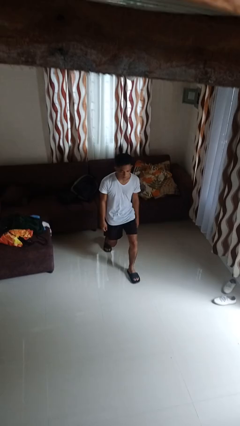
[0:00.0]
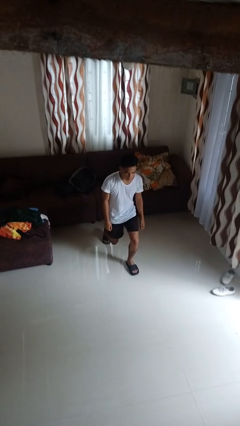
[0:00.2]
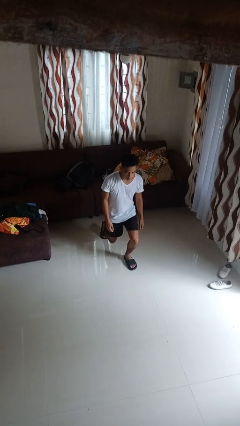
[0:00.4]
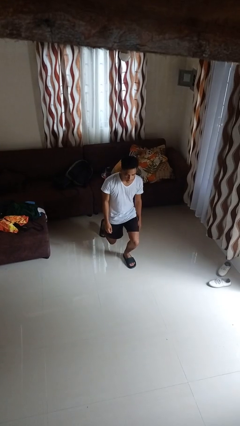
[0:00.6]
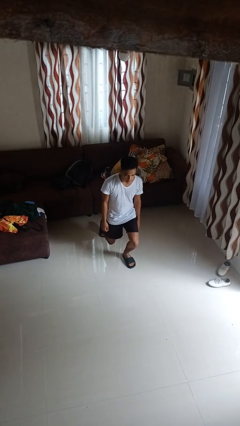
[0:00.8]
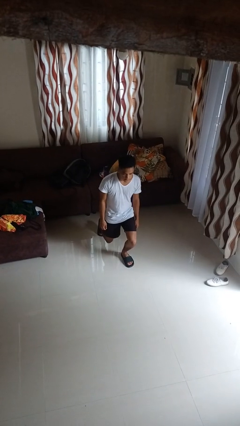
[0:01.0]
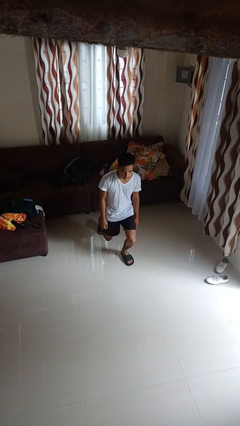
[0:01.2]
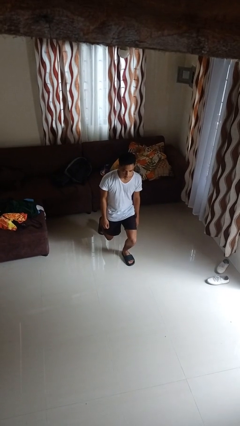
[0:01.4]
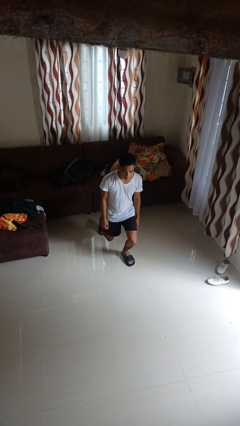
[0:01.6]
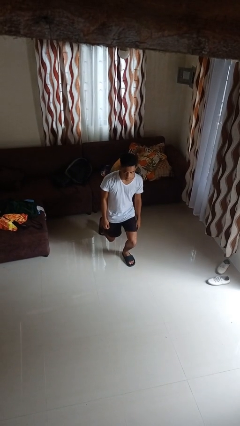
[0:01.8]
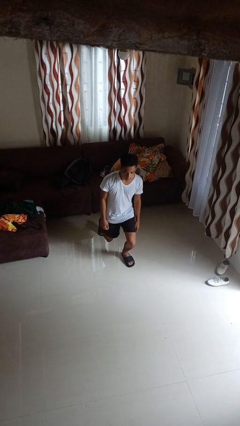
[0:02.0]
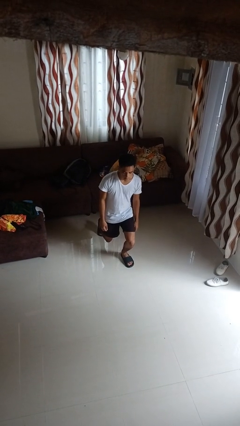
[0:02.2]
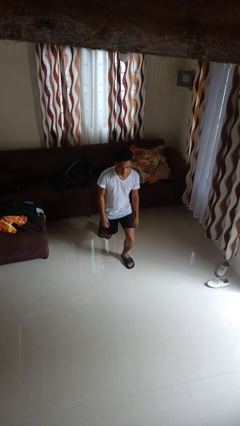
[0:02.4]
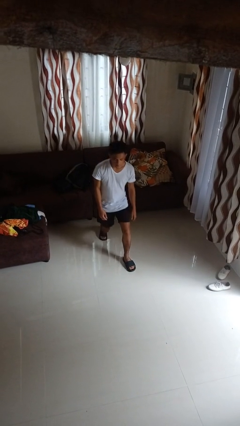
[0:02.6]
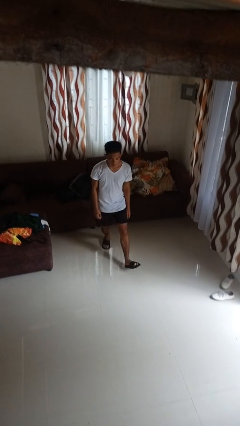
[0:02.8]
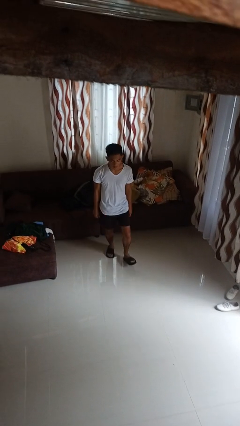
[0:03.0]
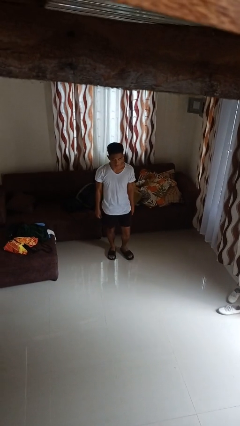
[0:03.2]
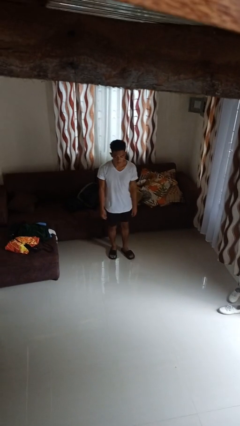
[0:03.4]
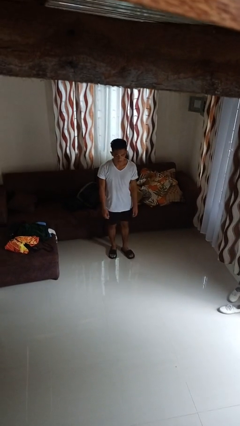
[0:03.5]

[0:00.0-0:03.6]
person exercises with lunges

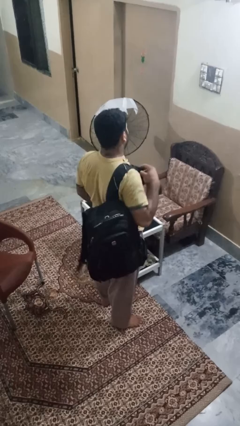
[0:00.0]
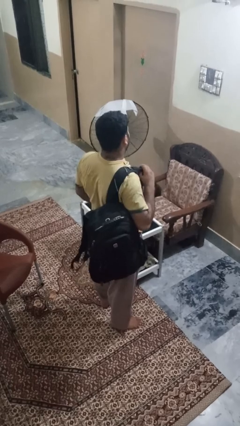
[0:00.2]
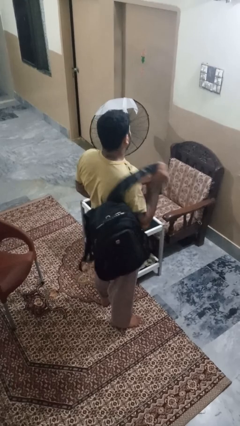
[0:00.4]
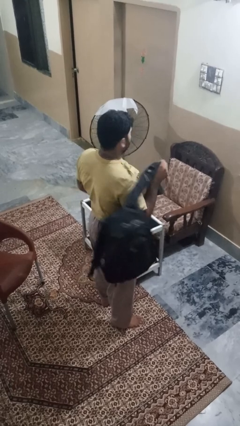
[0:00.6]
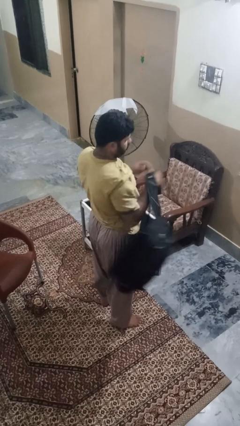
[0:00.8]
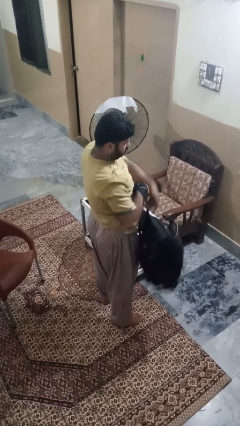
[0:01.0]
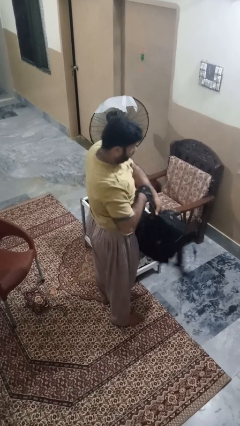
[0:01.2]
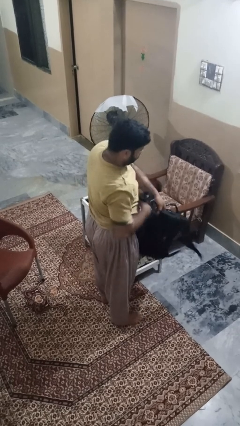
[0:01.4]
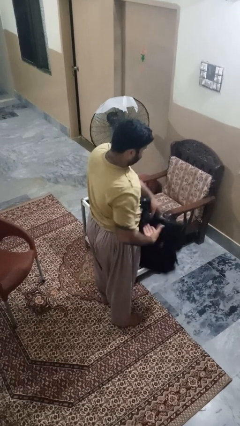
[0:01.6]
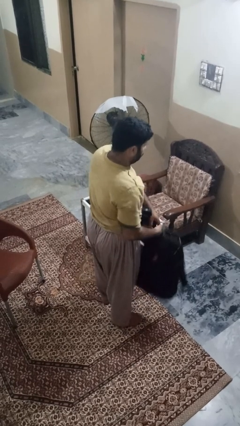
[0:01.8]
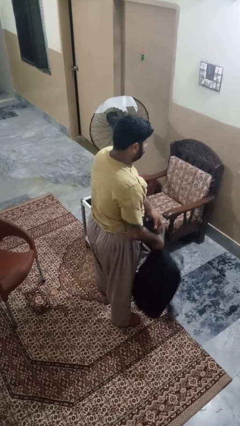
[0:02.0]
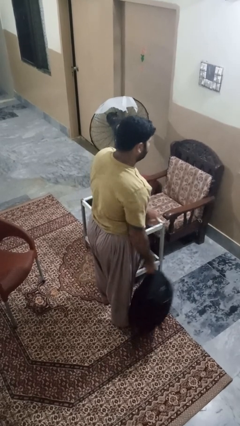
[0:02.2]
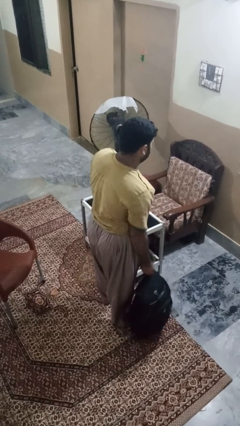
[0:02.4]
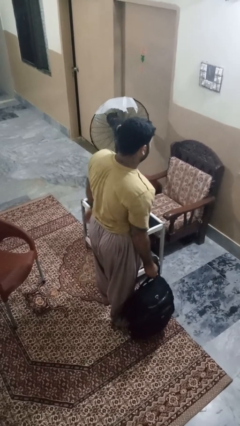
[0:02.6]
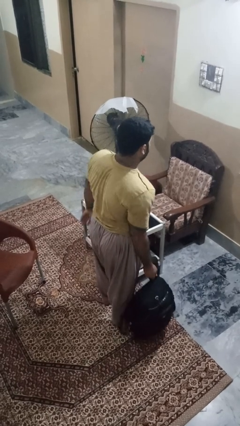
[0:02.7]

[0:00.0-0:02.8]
person takes off backpack

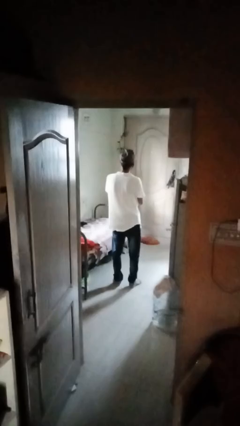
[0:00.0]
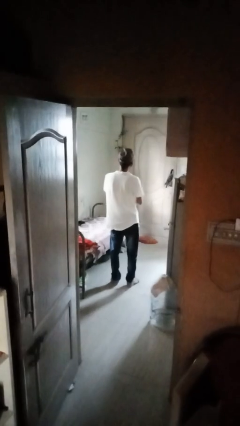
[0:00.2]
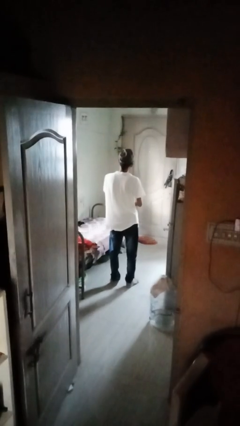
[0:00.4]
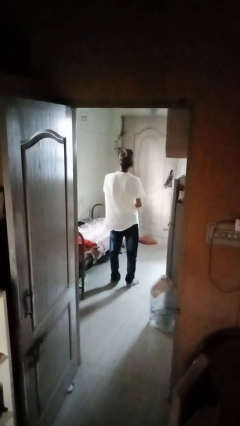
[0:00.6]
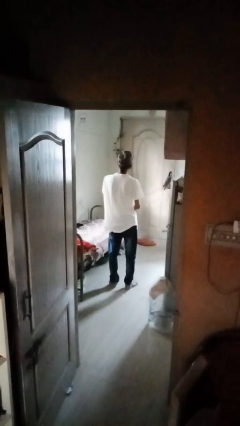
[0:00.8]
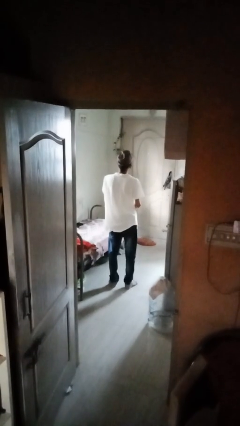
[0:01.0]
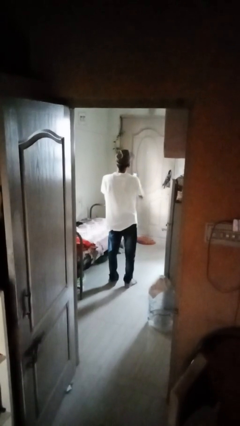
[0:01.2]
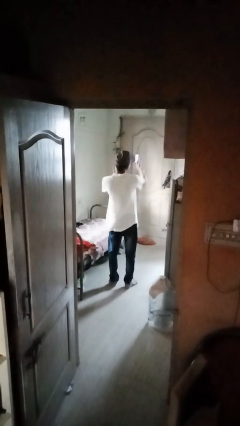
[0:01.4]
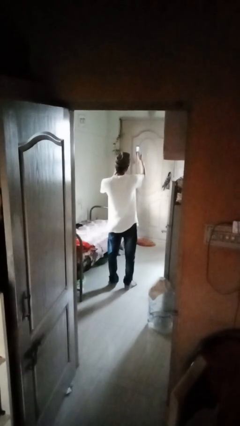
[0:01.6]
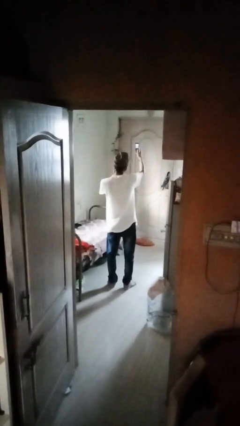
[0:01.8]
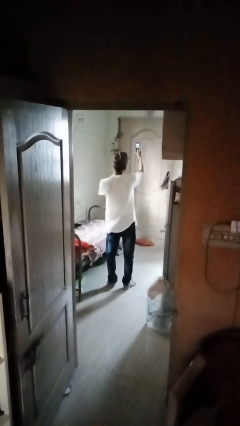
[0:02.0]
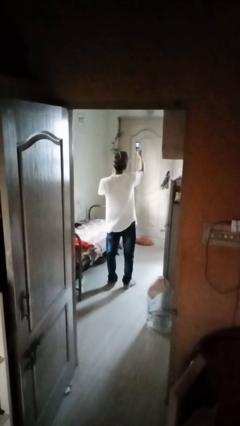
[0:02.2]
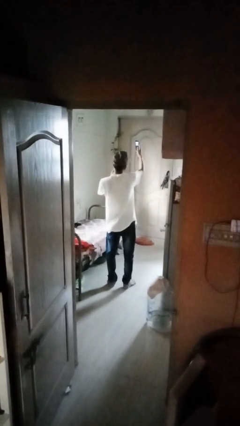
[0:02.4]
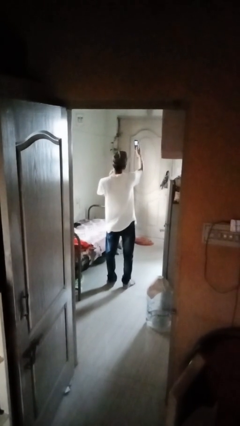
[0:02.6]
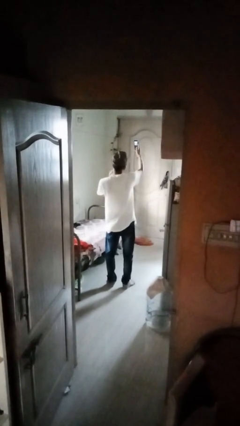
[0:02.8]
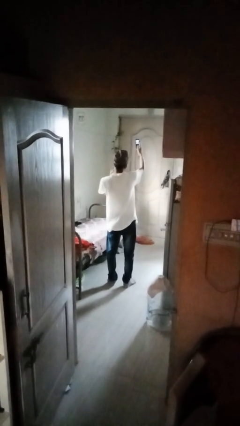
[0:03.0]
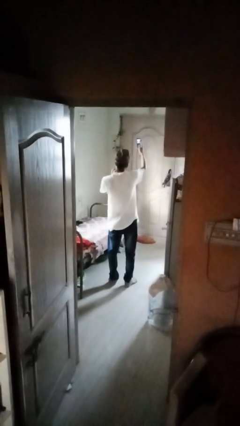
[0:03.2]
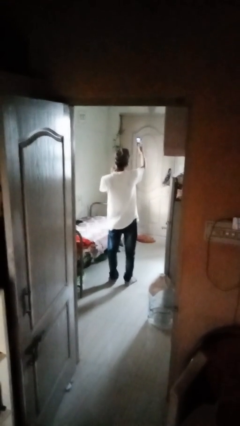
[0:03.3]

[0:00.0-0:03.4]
person takes selfie

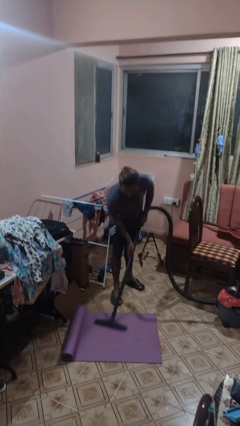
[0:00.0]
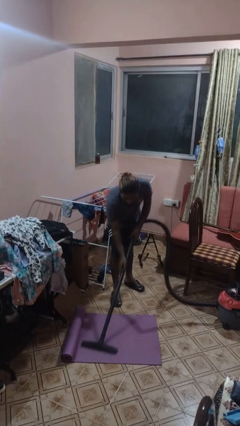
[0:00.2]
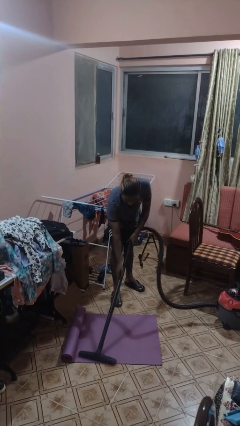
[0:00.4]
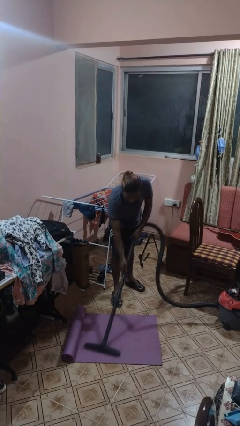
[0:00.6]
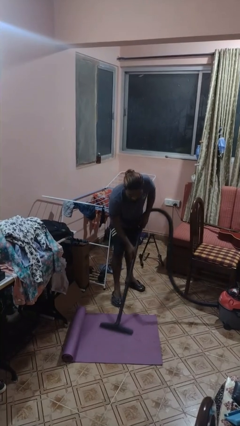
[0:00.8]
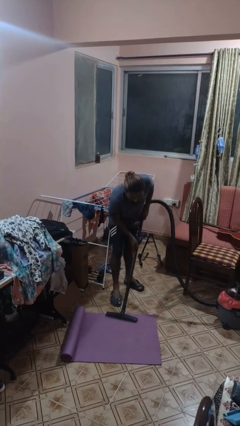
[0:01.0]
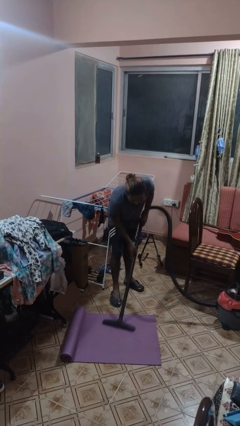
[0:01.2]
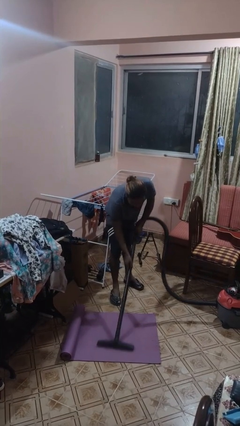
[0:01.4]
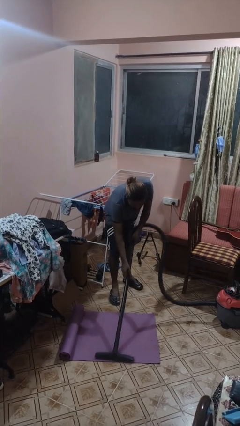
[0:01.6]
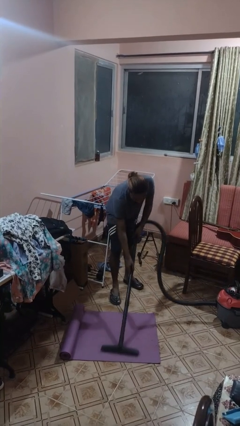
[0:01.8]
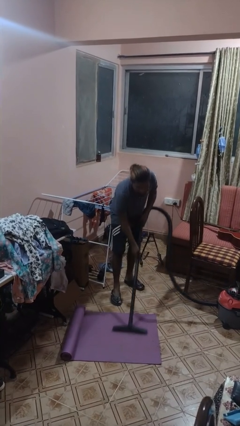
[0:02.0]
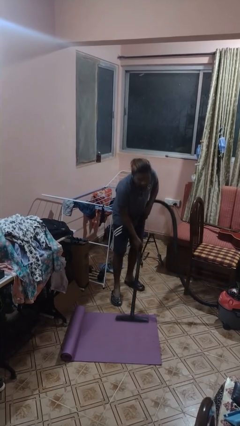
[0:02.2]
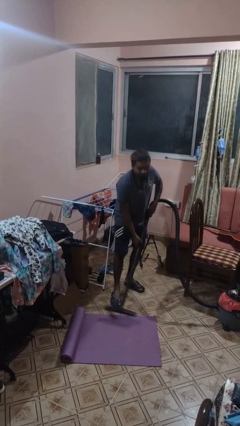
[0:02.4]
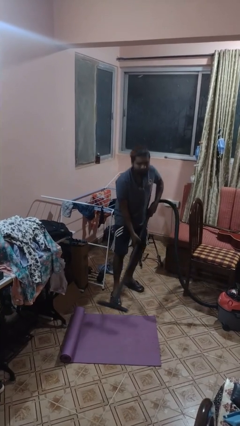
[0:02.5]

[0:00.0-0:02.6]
person vacuums carpet

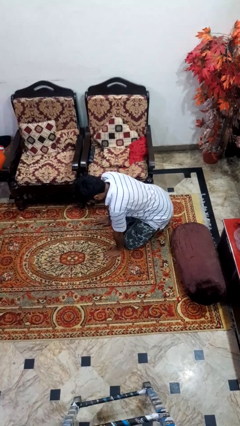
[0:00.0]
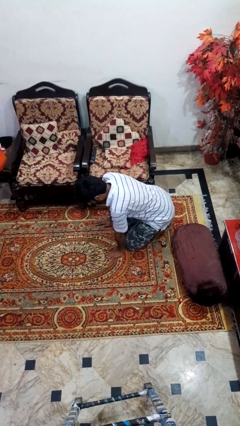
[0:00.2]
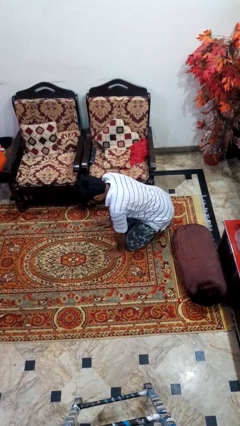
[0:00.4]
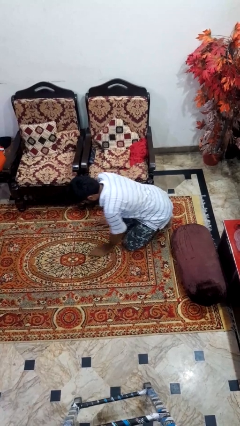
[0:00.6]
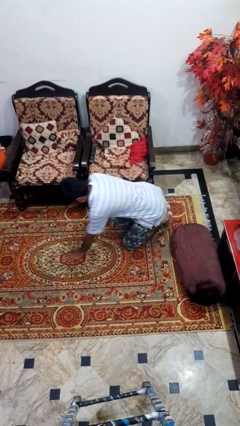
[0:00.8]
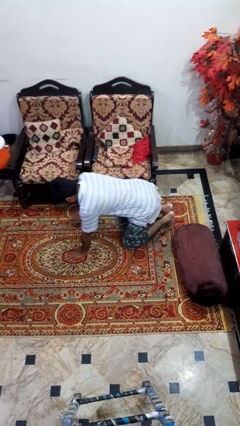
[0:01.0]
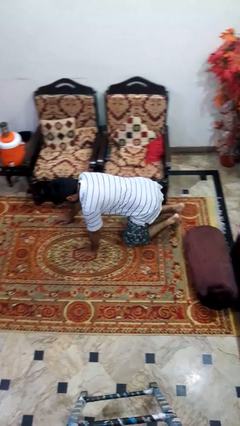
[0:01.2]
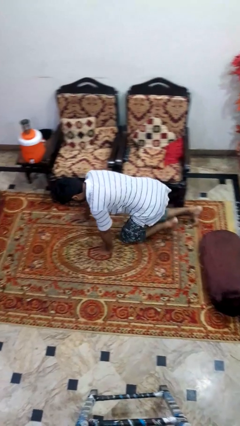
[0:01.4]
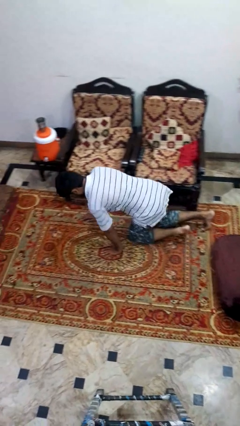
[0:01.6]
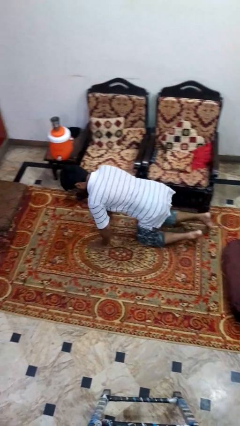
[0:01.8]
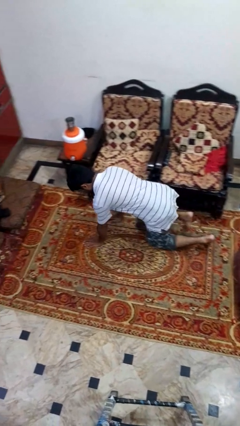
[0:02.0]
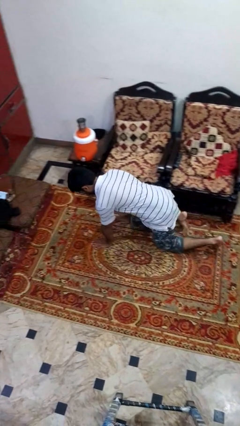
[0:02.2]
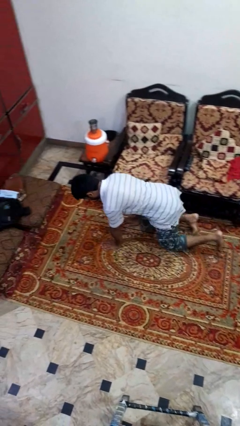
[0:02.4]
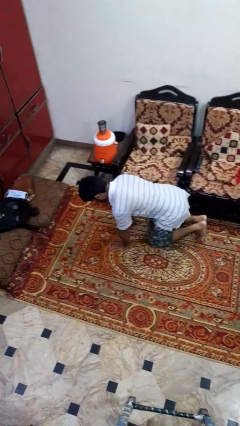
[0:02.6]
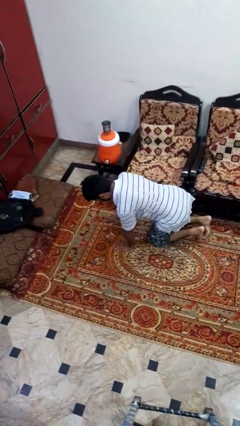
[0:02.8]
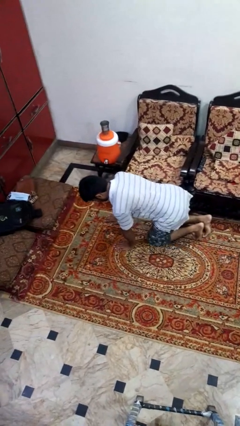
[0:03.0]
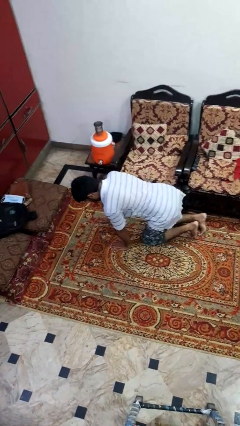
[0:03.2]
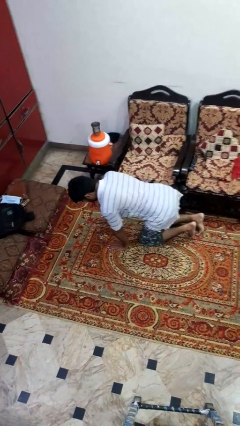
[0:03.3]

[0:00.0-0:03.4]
person crawls

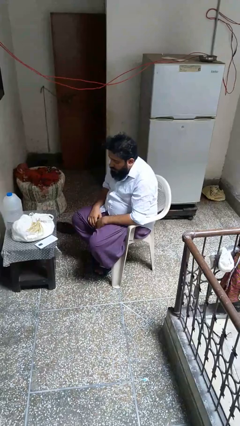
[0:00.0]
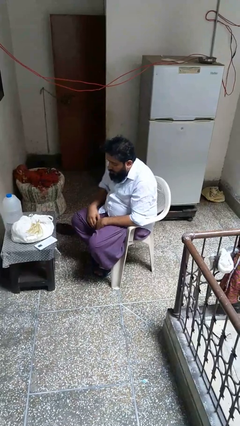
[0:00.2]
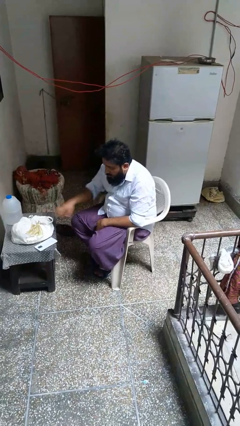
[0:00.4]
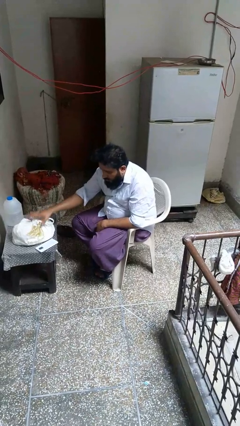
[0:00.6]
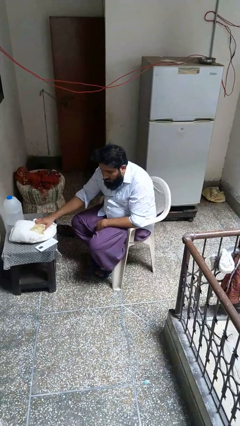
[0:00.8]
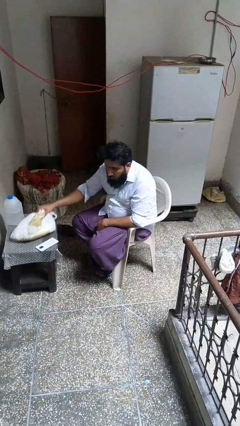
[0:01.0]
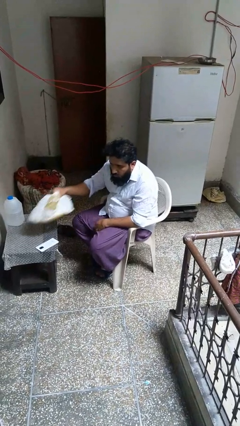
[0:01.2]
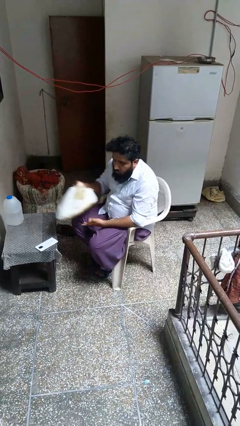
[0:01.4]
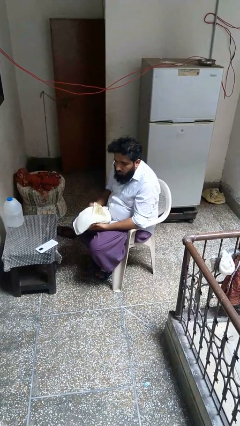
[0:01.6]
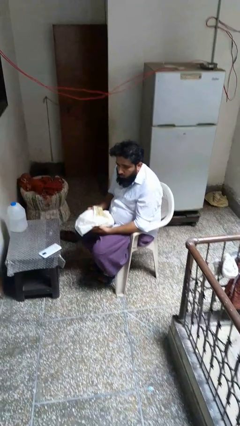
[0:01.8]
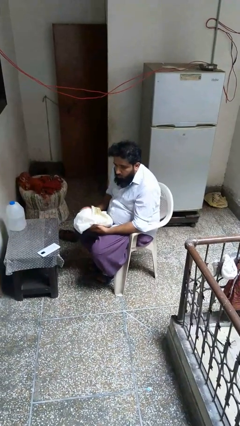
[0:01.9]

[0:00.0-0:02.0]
person picks up object from table
